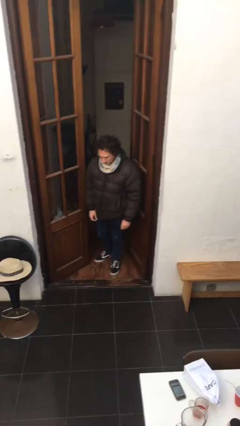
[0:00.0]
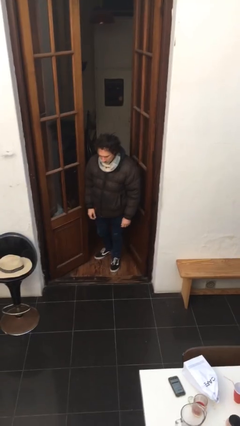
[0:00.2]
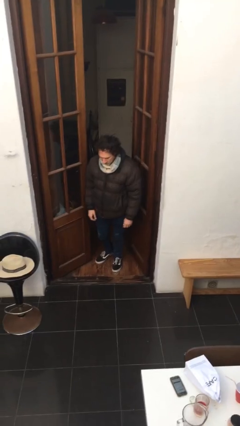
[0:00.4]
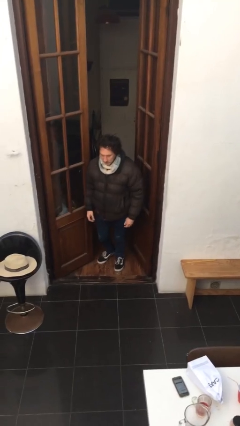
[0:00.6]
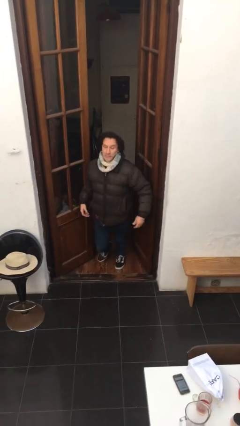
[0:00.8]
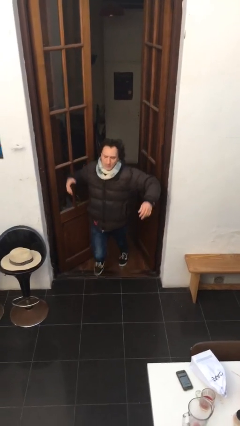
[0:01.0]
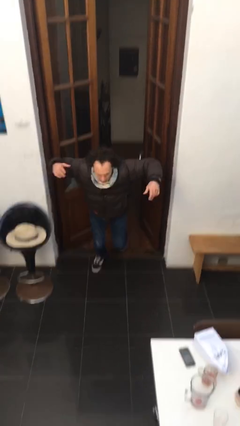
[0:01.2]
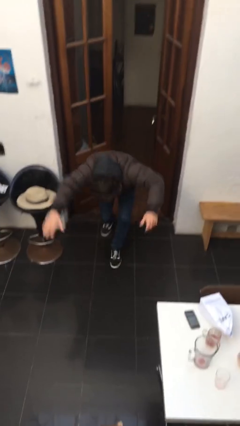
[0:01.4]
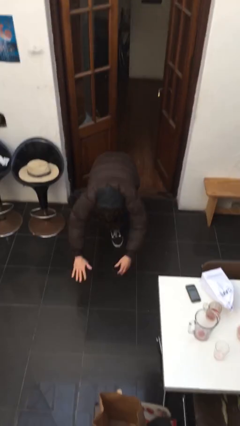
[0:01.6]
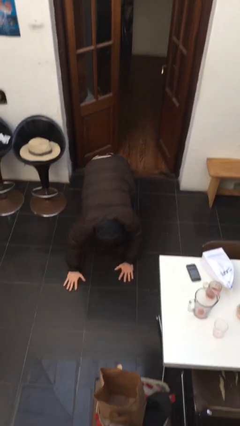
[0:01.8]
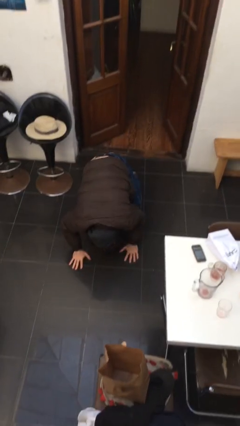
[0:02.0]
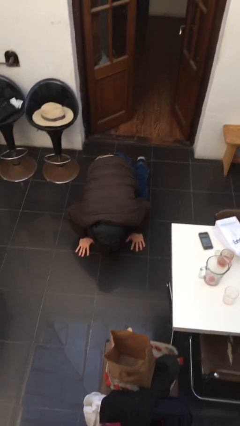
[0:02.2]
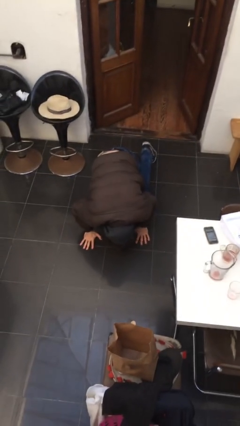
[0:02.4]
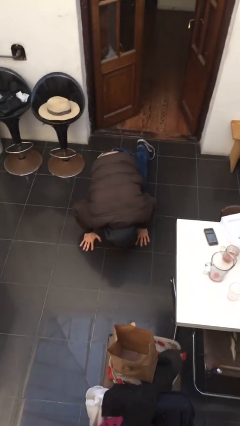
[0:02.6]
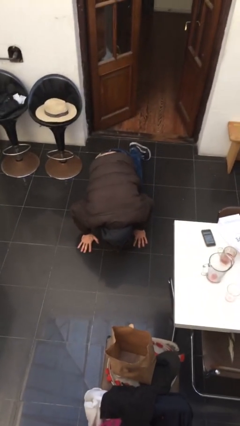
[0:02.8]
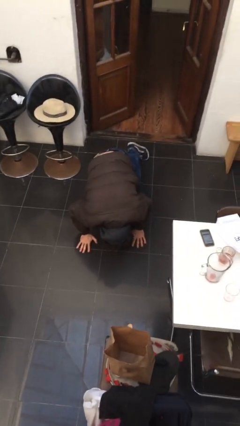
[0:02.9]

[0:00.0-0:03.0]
person trips on object on floor

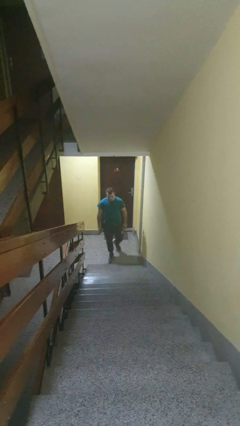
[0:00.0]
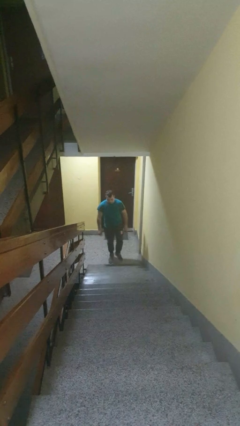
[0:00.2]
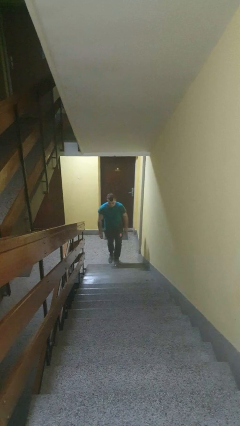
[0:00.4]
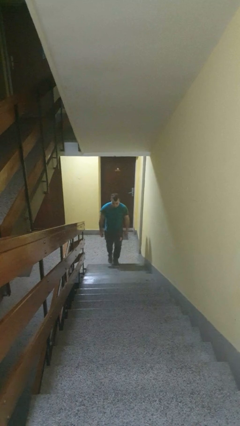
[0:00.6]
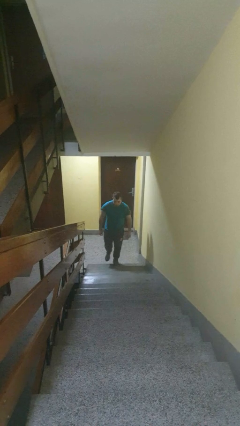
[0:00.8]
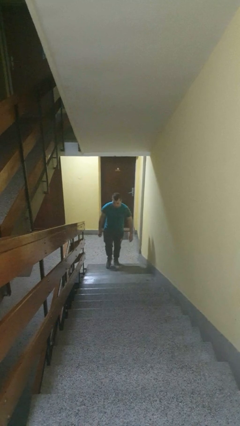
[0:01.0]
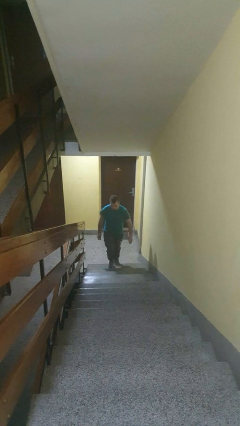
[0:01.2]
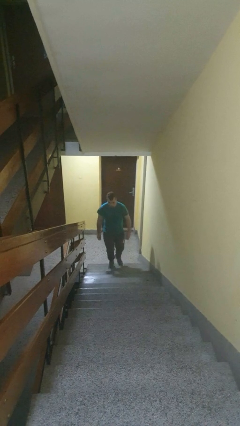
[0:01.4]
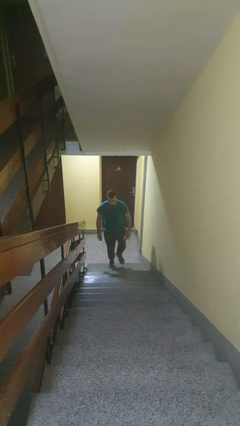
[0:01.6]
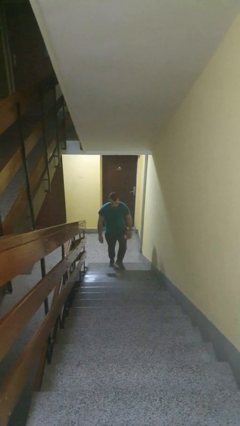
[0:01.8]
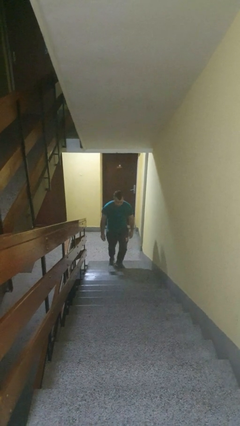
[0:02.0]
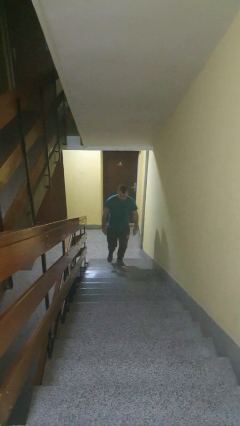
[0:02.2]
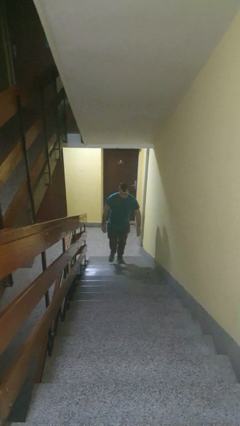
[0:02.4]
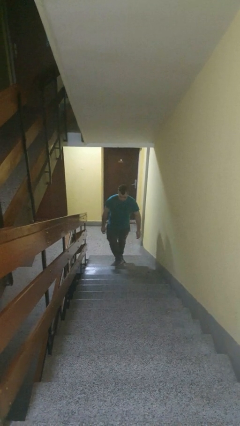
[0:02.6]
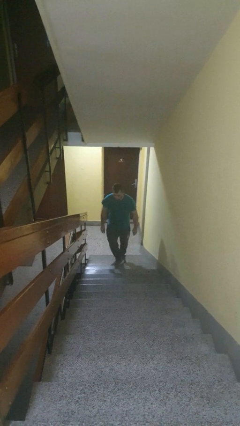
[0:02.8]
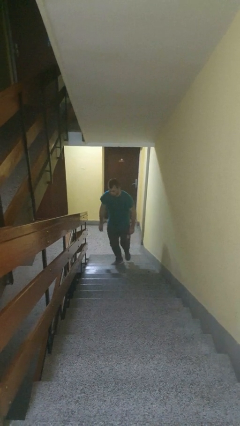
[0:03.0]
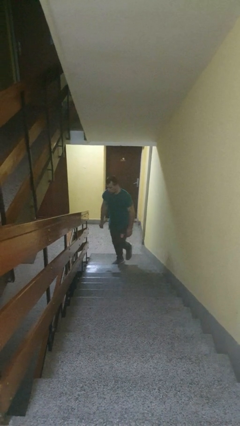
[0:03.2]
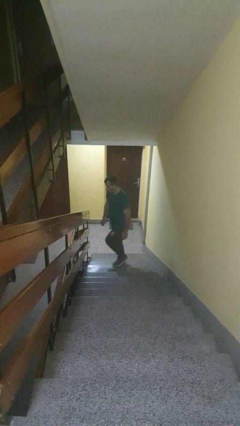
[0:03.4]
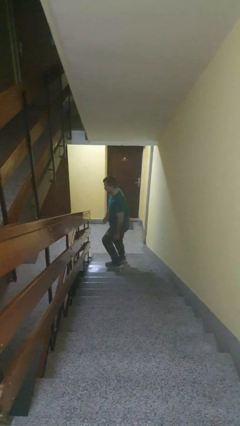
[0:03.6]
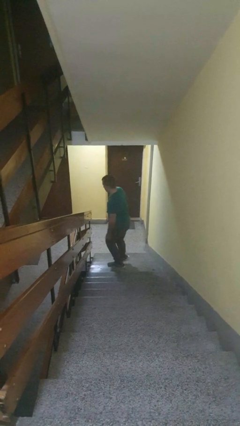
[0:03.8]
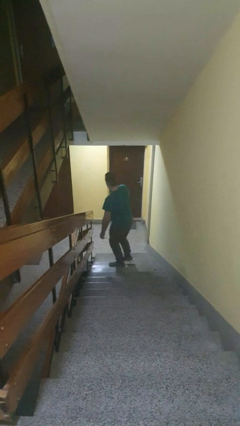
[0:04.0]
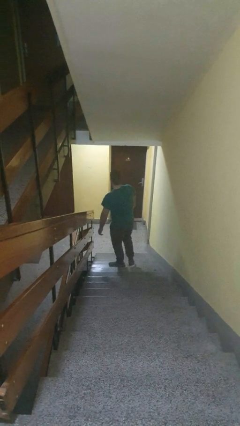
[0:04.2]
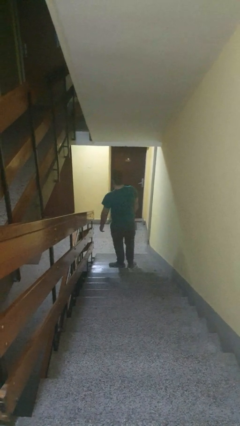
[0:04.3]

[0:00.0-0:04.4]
person climbs up stairs

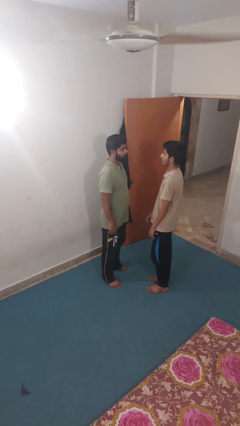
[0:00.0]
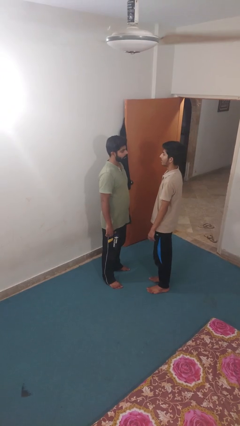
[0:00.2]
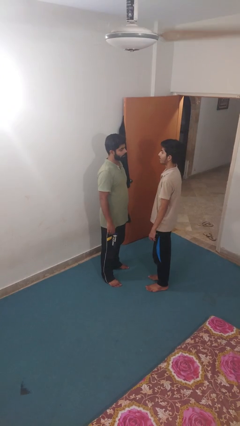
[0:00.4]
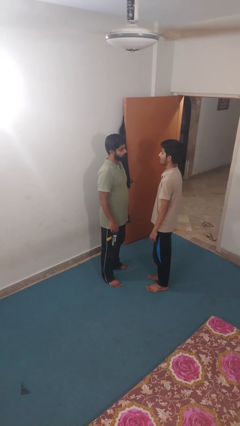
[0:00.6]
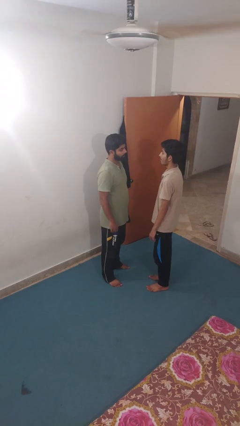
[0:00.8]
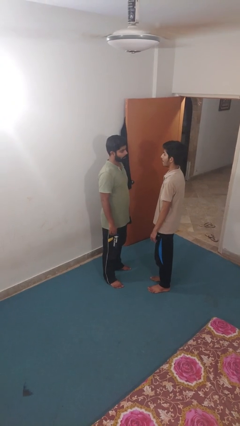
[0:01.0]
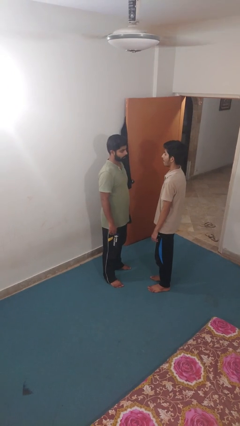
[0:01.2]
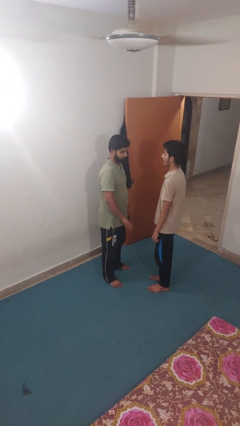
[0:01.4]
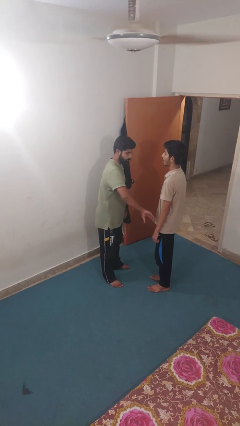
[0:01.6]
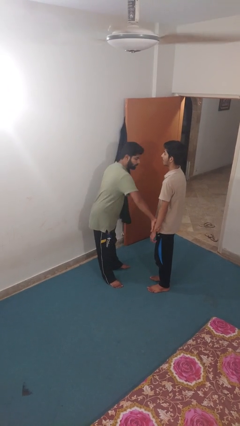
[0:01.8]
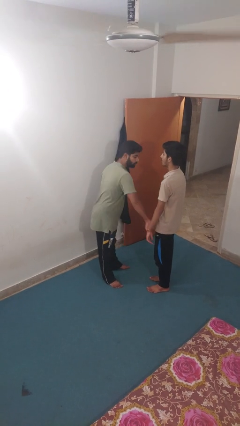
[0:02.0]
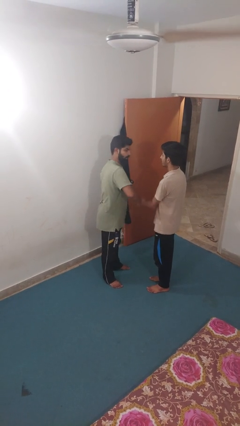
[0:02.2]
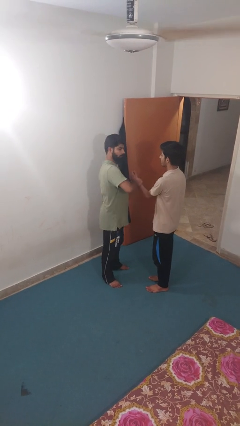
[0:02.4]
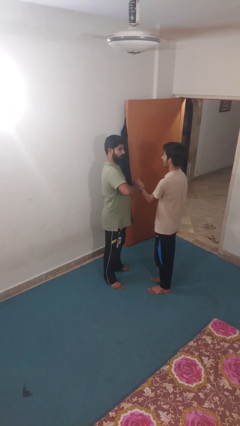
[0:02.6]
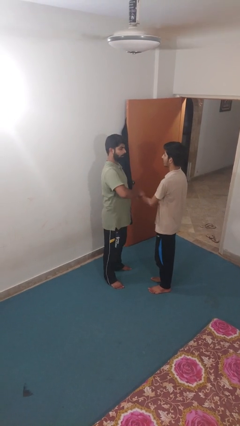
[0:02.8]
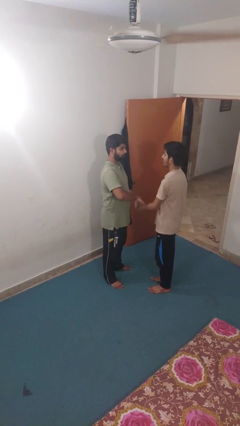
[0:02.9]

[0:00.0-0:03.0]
person grabs person by forearm

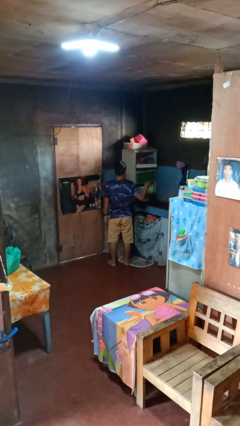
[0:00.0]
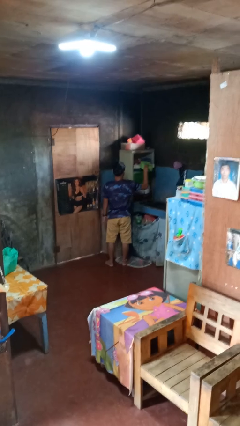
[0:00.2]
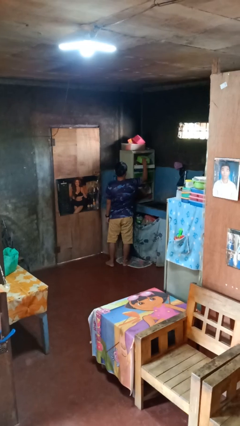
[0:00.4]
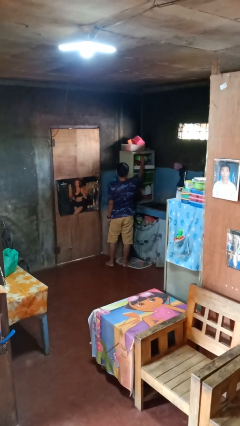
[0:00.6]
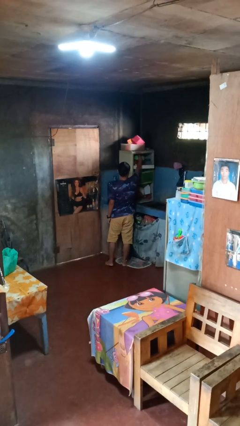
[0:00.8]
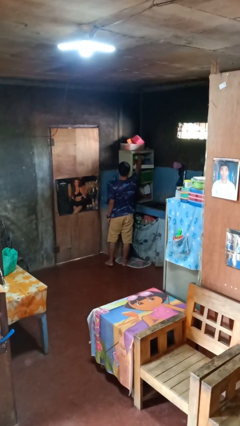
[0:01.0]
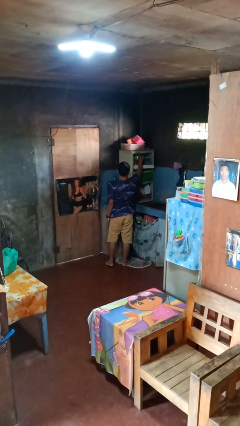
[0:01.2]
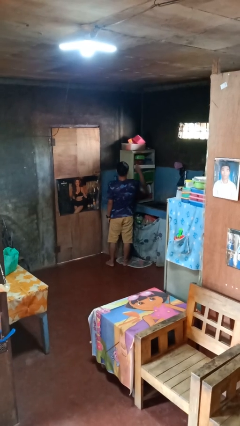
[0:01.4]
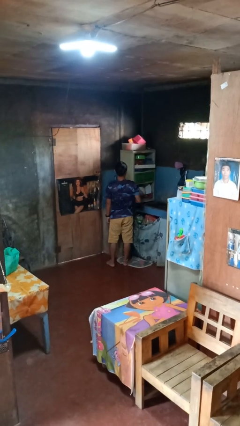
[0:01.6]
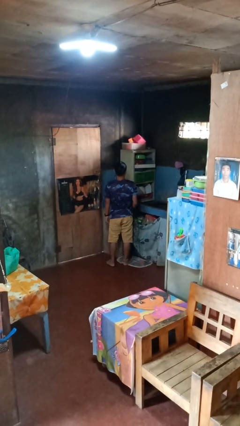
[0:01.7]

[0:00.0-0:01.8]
person puts object in cabinet

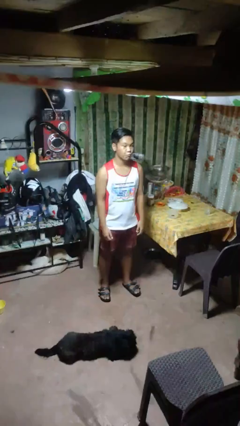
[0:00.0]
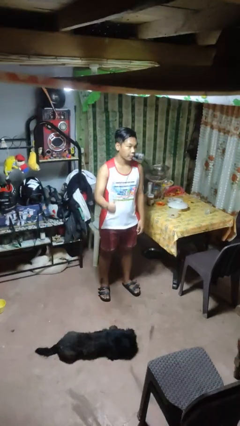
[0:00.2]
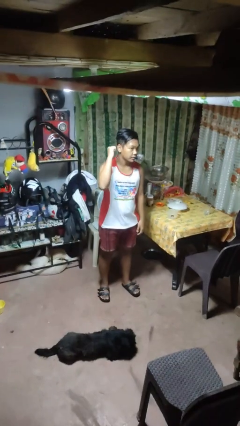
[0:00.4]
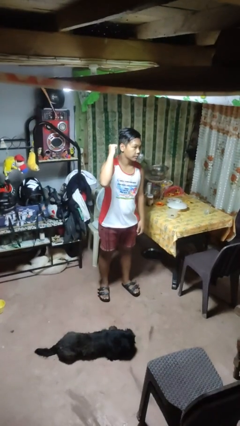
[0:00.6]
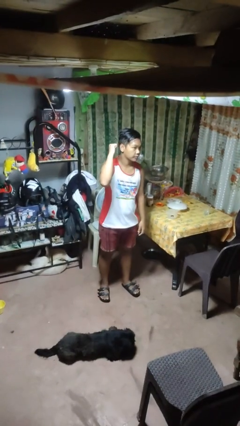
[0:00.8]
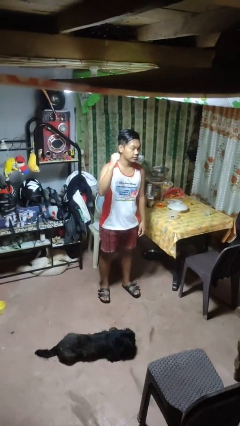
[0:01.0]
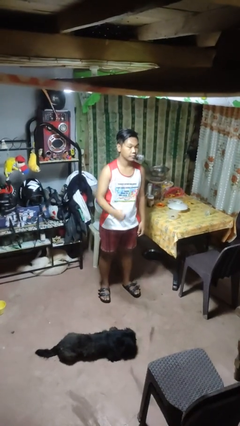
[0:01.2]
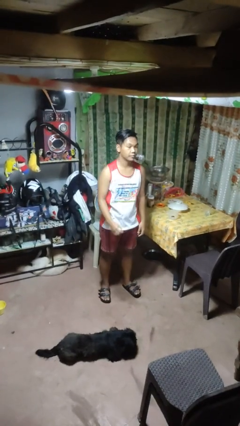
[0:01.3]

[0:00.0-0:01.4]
person gestures behind me

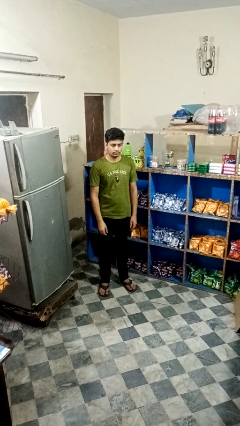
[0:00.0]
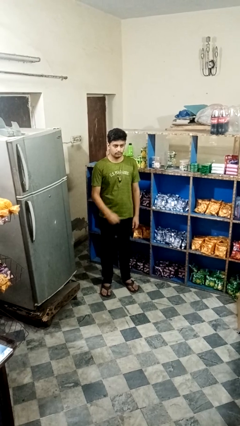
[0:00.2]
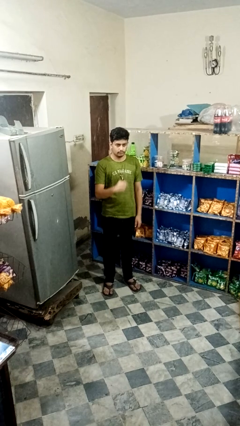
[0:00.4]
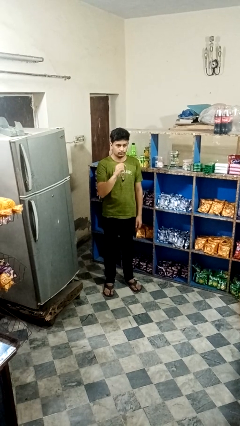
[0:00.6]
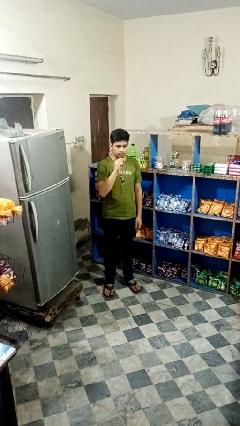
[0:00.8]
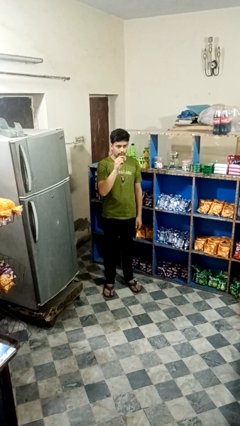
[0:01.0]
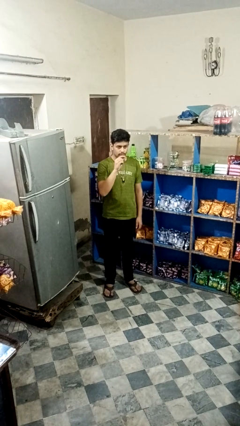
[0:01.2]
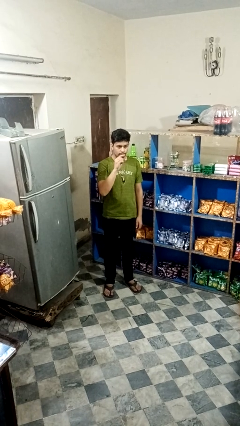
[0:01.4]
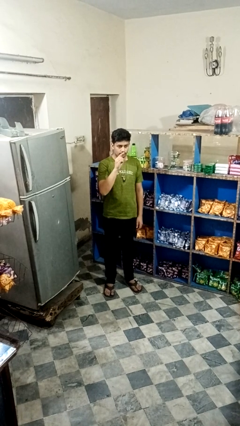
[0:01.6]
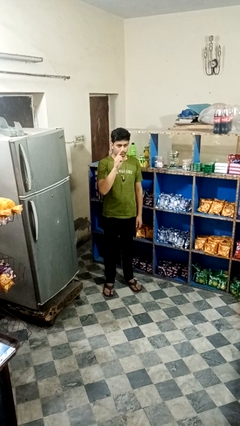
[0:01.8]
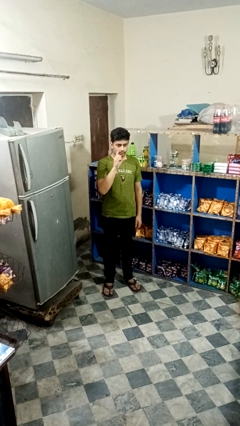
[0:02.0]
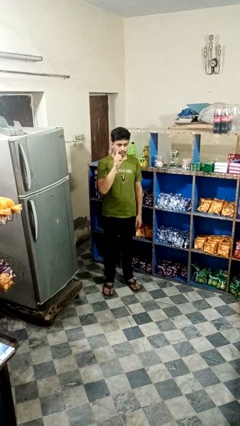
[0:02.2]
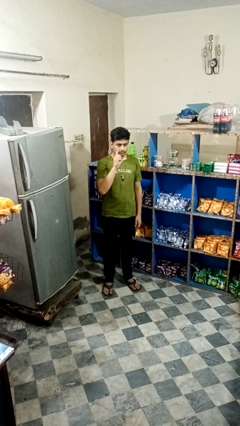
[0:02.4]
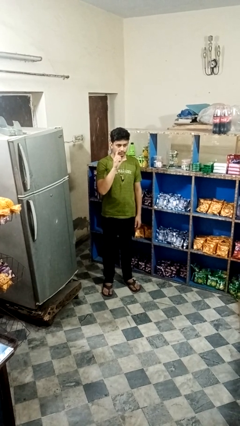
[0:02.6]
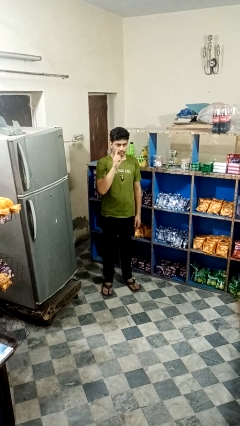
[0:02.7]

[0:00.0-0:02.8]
person gestures zoom in

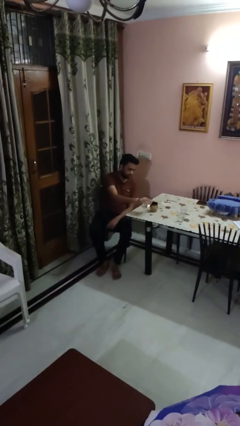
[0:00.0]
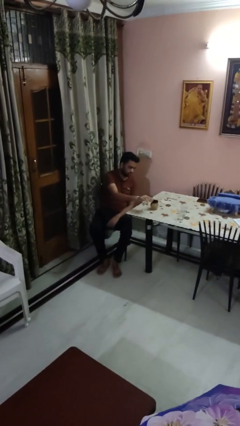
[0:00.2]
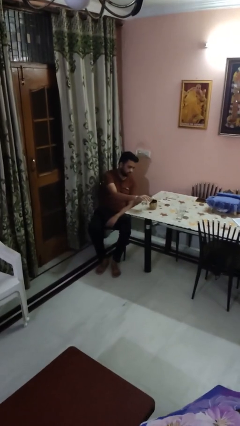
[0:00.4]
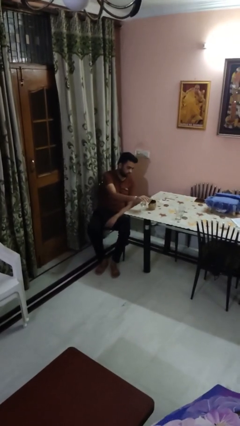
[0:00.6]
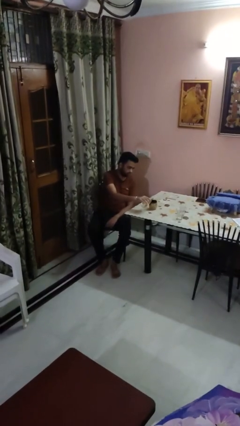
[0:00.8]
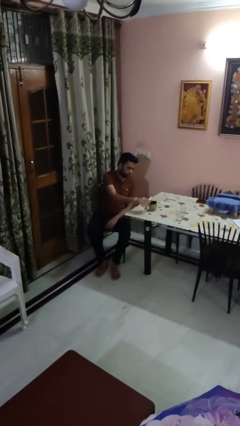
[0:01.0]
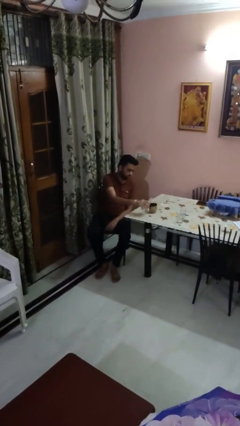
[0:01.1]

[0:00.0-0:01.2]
person pours liquid into cup
